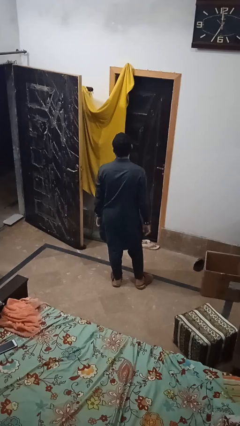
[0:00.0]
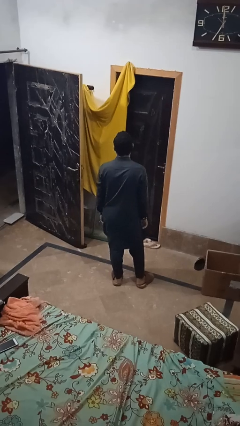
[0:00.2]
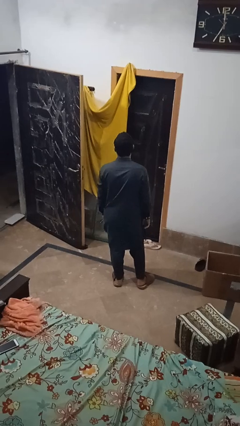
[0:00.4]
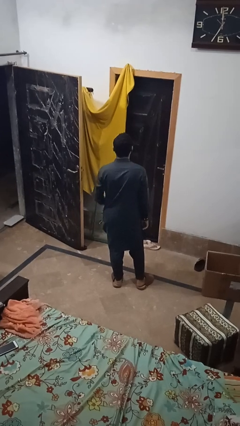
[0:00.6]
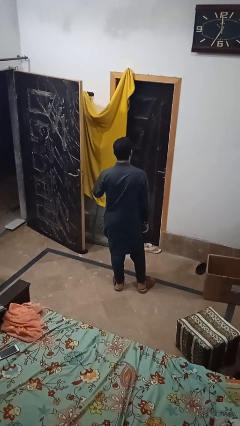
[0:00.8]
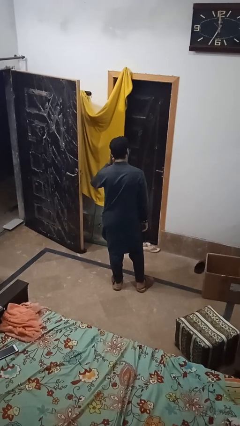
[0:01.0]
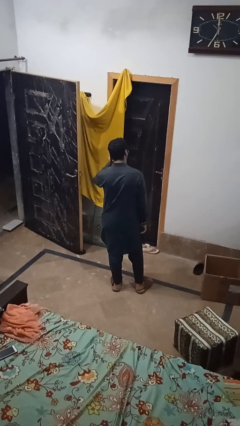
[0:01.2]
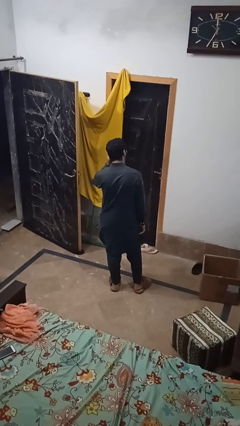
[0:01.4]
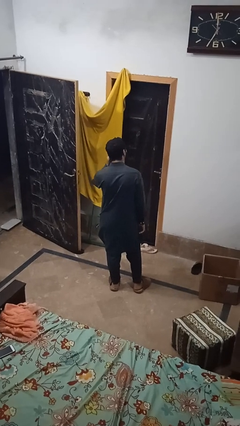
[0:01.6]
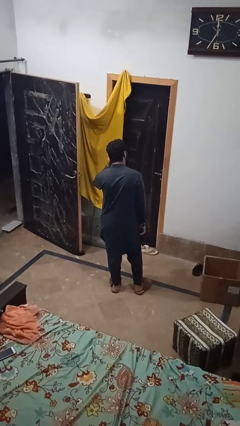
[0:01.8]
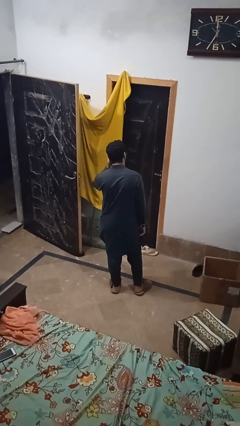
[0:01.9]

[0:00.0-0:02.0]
person gestures listen closely

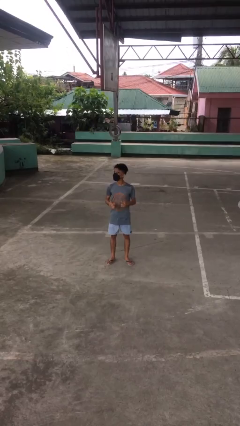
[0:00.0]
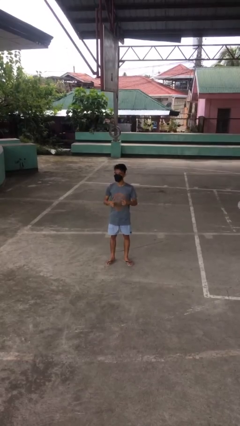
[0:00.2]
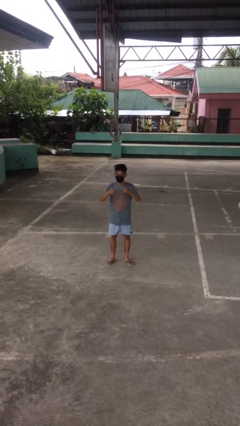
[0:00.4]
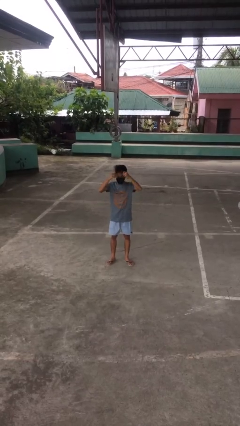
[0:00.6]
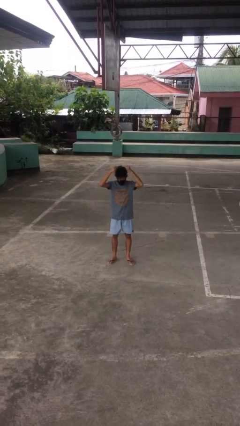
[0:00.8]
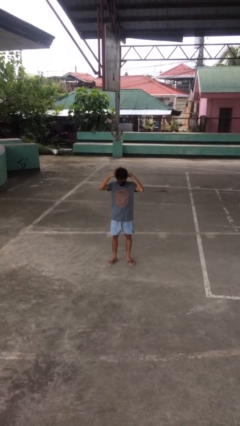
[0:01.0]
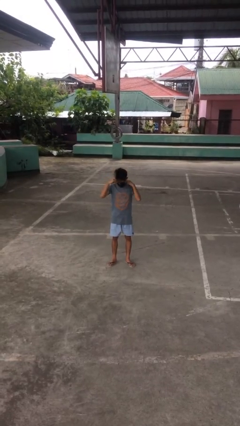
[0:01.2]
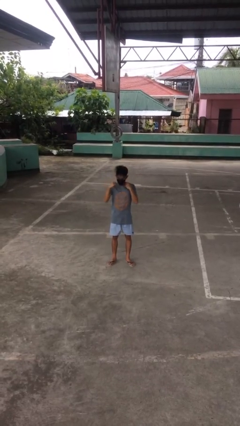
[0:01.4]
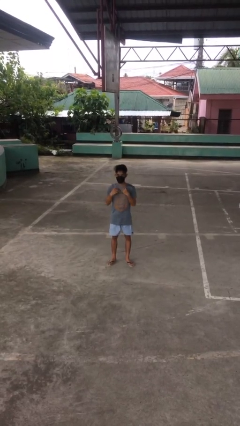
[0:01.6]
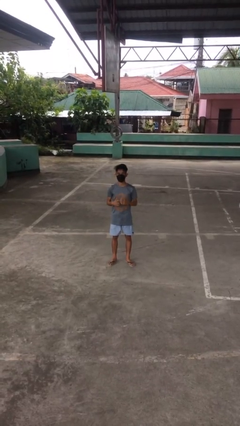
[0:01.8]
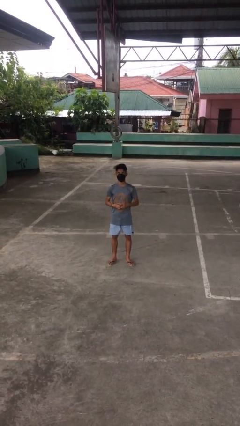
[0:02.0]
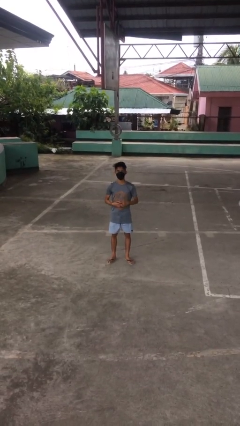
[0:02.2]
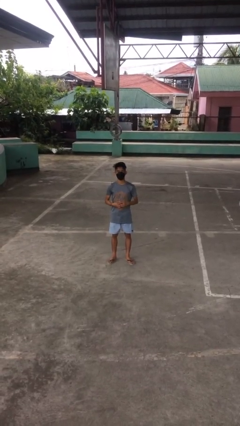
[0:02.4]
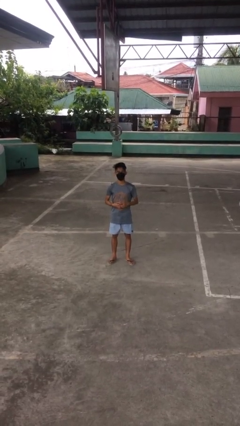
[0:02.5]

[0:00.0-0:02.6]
person puts on necklace

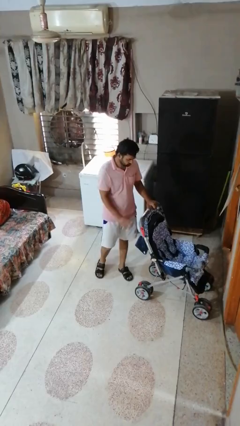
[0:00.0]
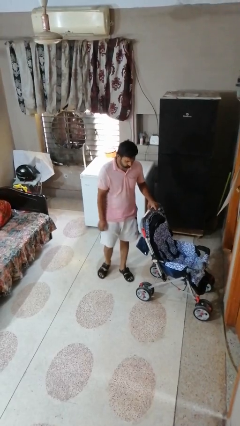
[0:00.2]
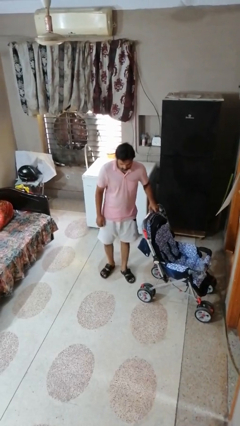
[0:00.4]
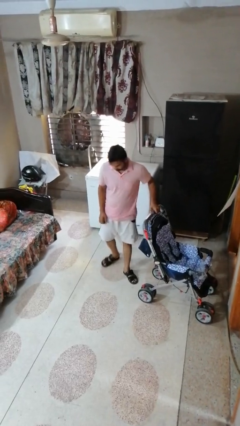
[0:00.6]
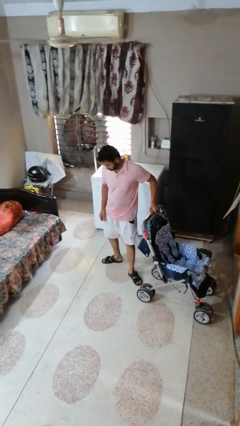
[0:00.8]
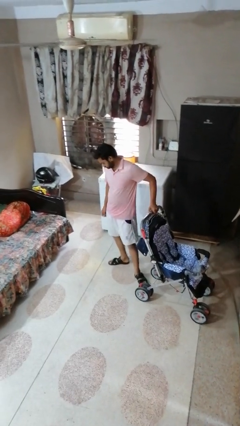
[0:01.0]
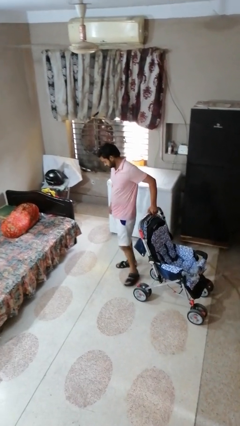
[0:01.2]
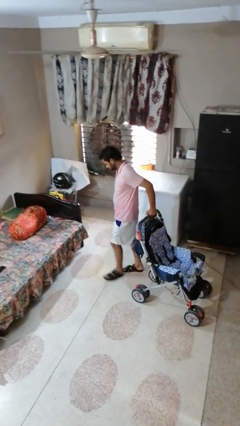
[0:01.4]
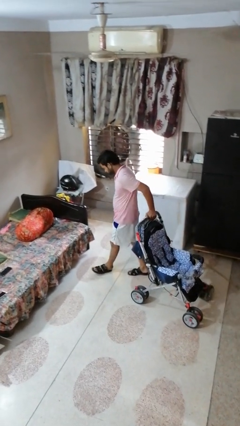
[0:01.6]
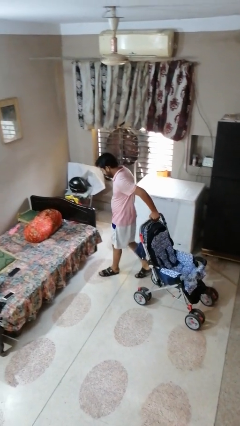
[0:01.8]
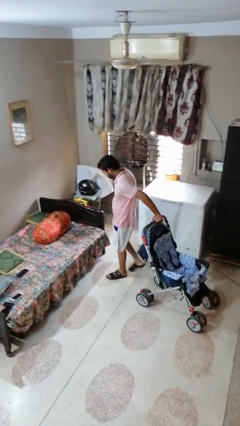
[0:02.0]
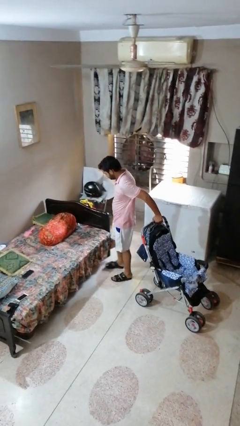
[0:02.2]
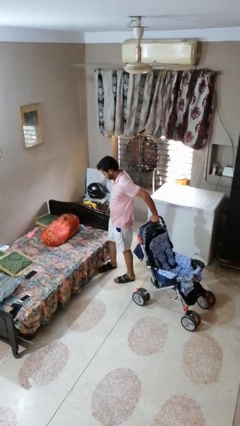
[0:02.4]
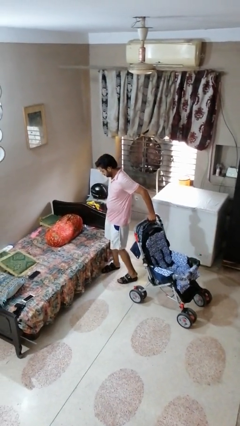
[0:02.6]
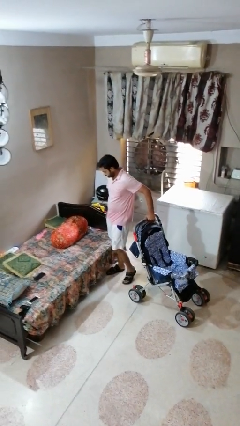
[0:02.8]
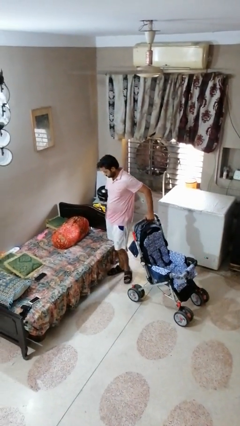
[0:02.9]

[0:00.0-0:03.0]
person pulls wheeled cart

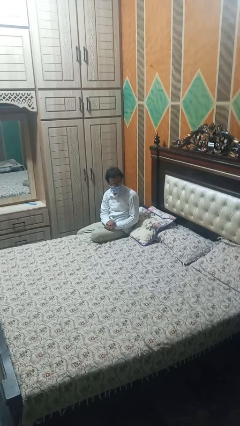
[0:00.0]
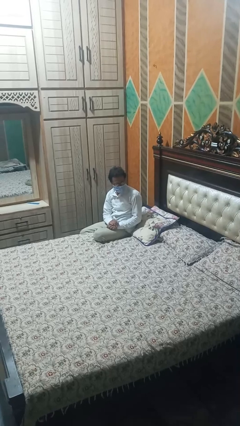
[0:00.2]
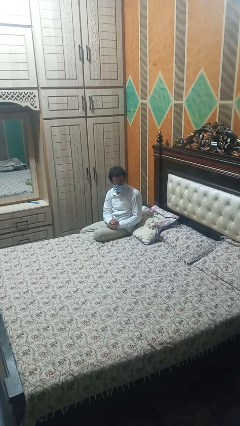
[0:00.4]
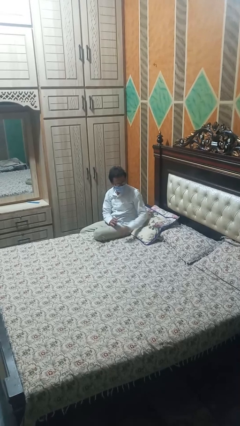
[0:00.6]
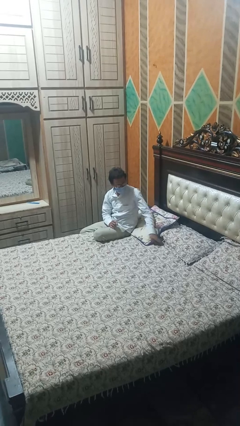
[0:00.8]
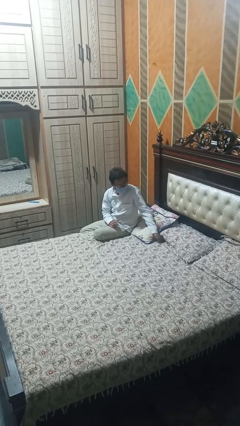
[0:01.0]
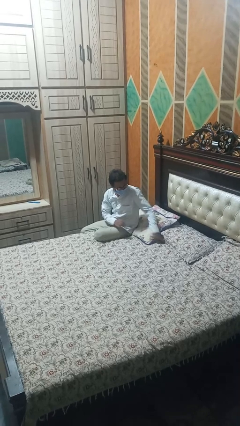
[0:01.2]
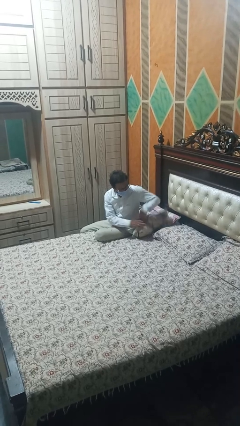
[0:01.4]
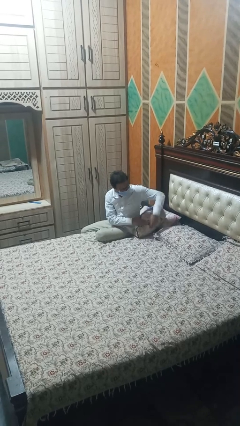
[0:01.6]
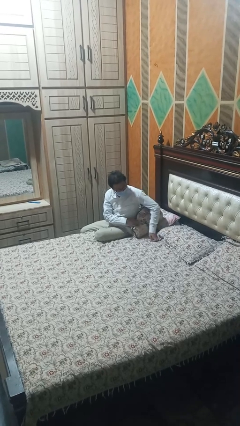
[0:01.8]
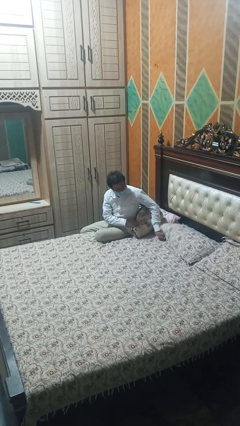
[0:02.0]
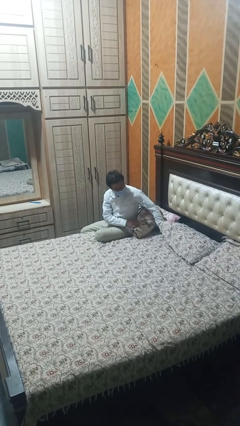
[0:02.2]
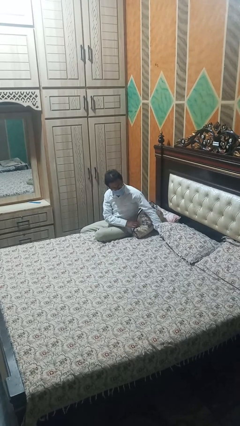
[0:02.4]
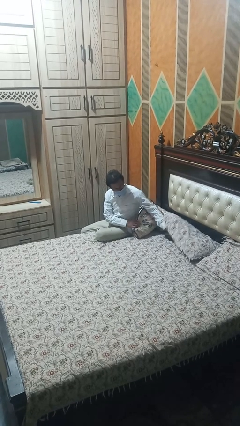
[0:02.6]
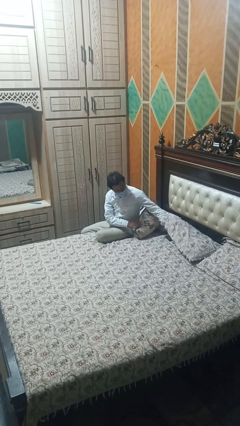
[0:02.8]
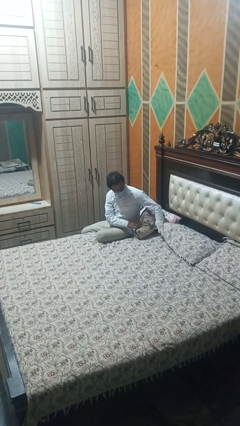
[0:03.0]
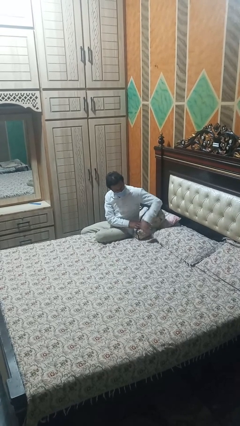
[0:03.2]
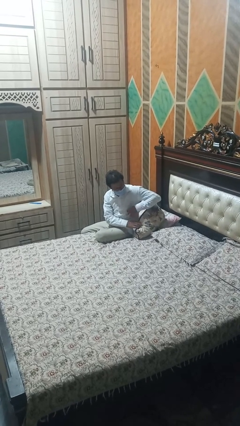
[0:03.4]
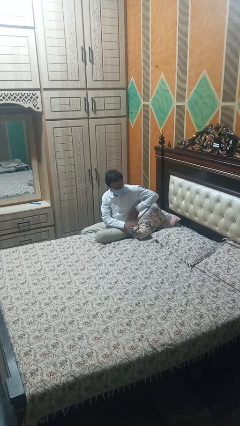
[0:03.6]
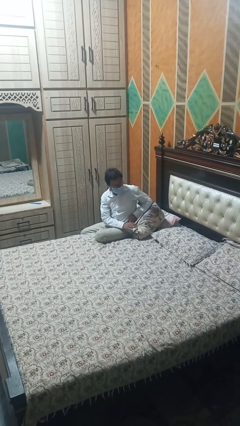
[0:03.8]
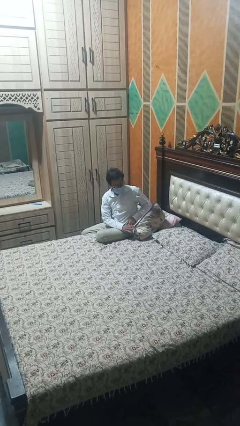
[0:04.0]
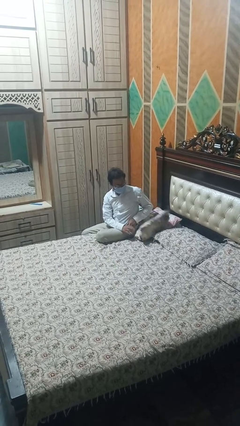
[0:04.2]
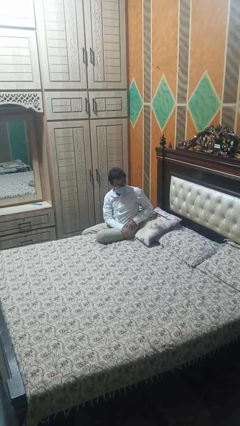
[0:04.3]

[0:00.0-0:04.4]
person searches under bed

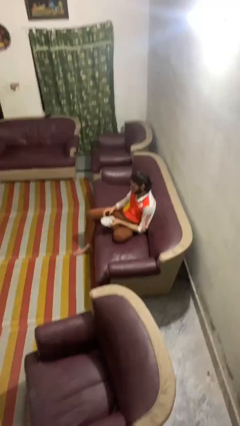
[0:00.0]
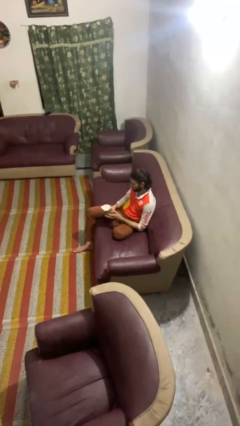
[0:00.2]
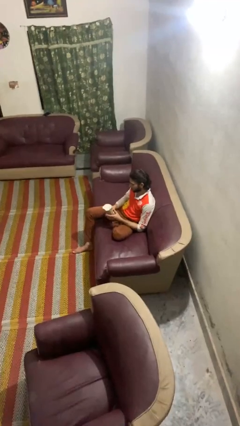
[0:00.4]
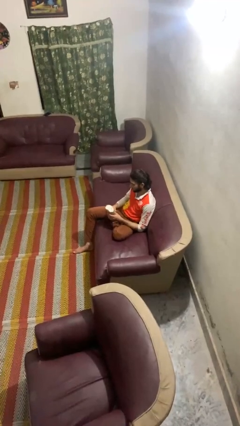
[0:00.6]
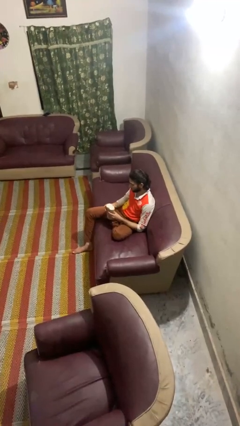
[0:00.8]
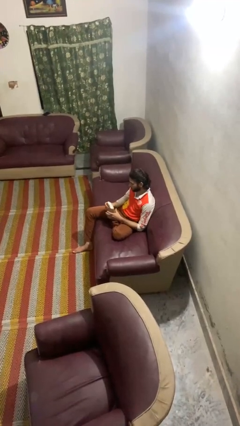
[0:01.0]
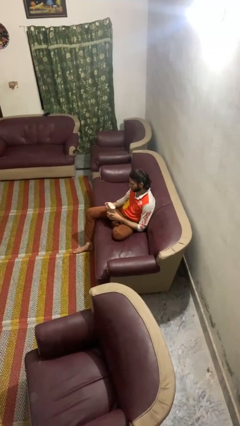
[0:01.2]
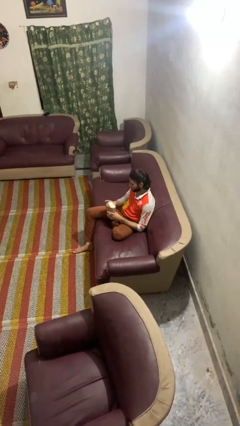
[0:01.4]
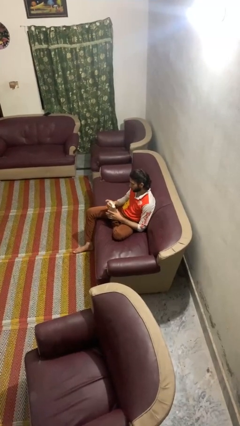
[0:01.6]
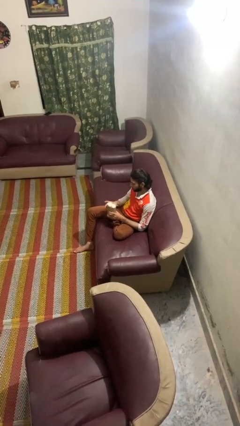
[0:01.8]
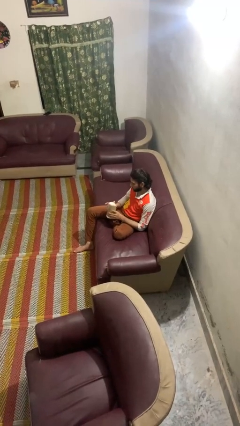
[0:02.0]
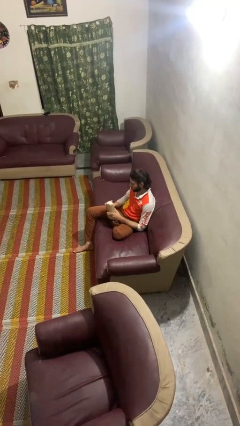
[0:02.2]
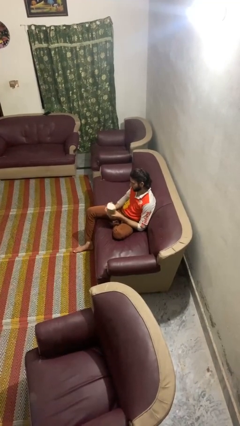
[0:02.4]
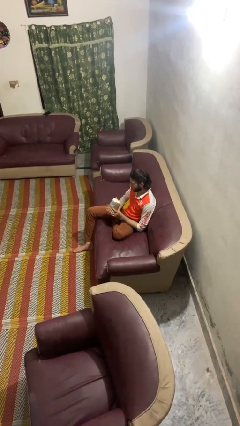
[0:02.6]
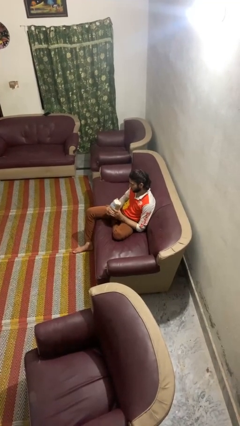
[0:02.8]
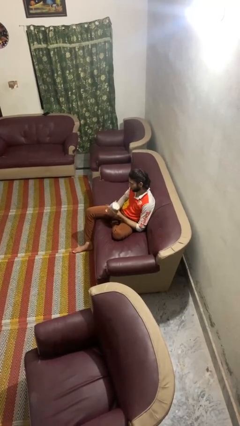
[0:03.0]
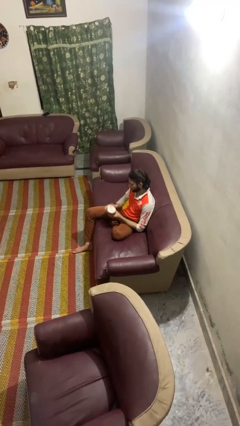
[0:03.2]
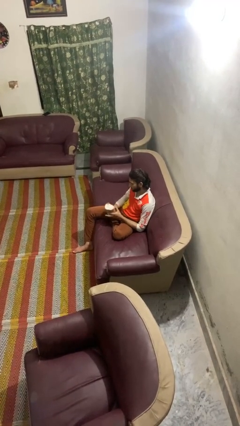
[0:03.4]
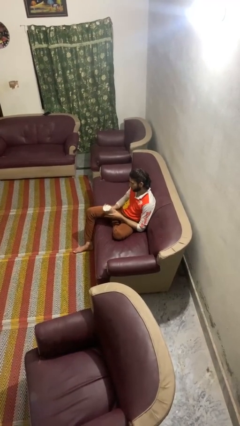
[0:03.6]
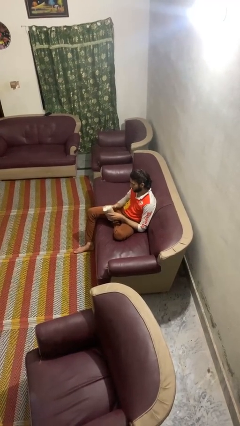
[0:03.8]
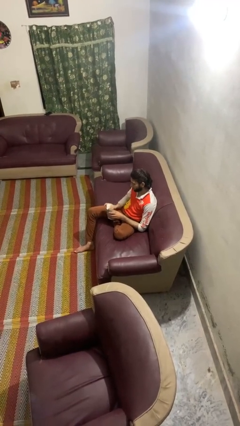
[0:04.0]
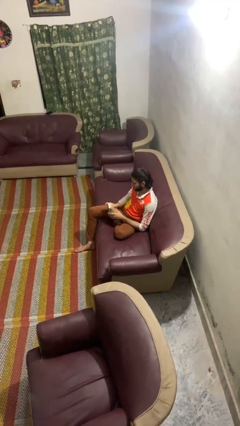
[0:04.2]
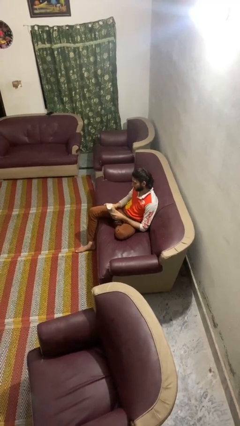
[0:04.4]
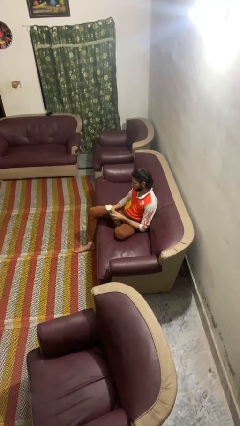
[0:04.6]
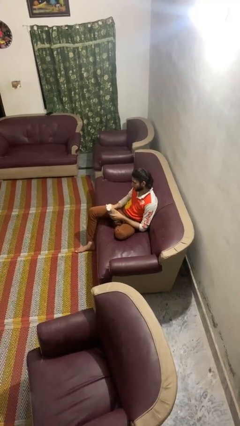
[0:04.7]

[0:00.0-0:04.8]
person squeezes object

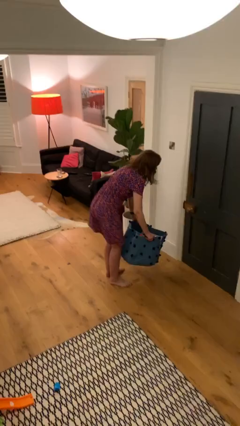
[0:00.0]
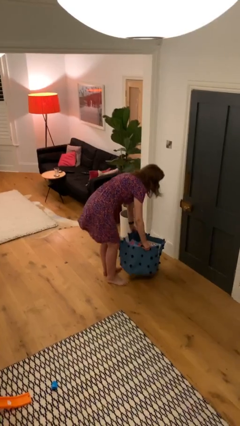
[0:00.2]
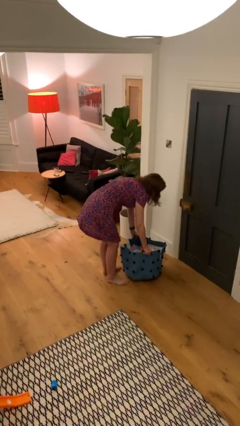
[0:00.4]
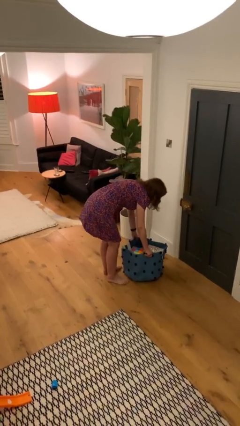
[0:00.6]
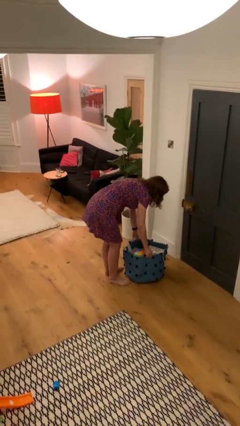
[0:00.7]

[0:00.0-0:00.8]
person puts down object on floor
